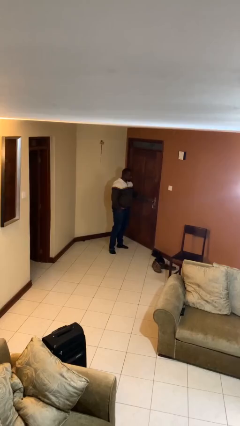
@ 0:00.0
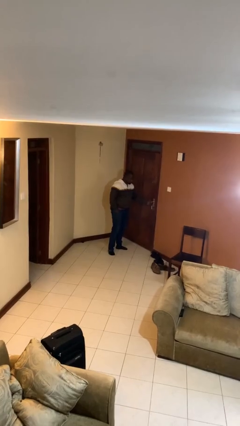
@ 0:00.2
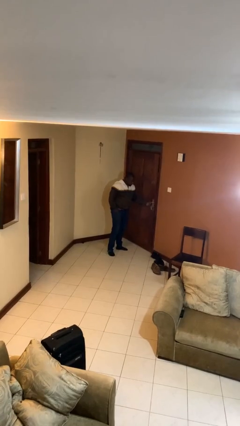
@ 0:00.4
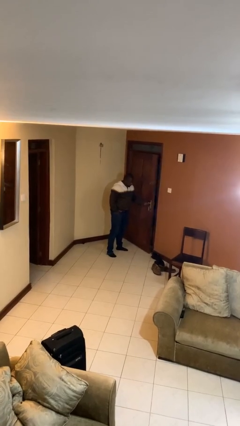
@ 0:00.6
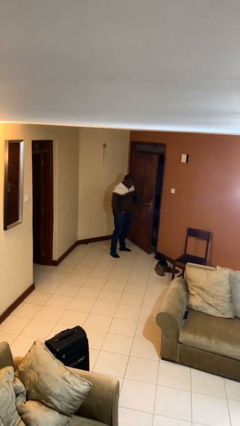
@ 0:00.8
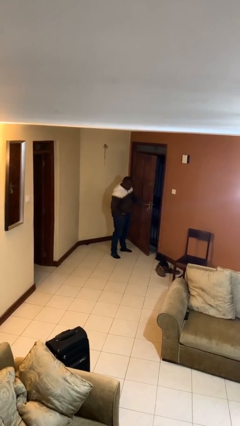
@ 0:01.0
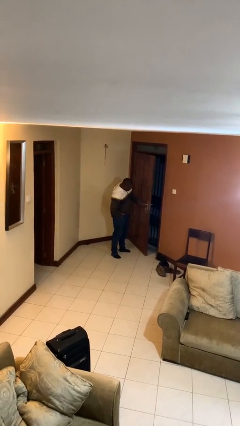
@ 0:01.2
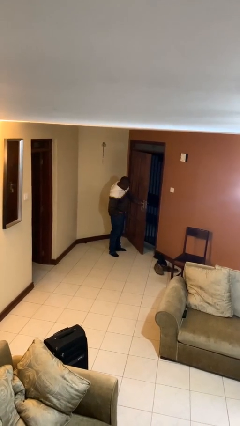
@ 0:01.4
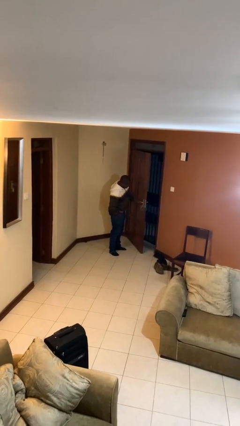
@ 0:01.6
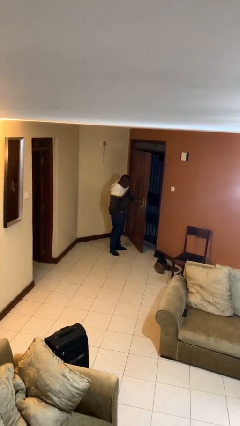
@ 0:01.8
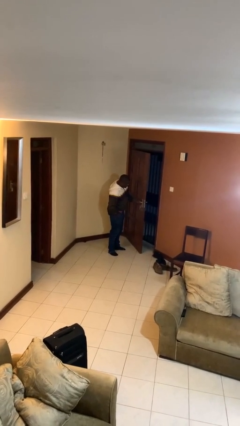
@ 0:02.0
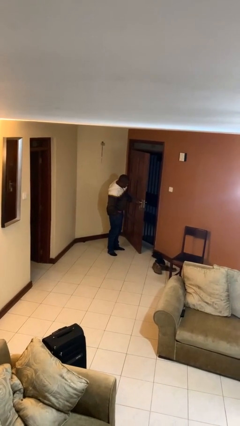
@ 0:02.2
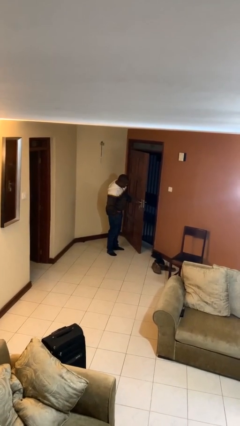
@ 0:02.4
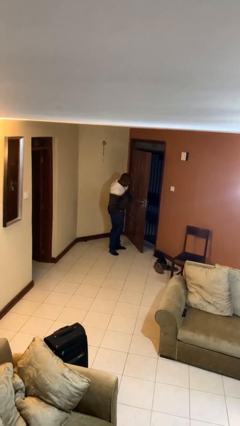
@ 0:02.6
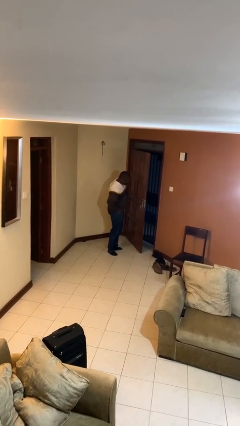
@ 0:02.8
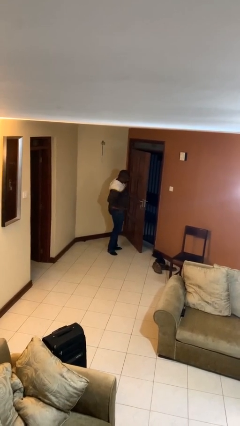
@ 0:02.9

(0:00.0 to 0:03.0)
person opens facility door

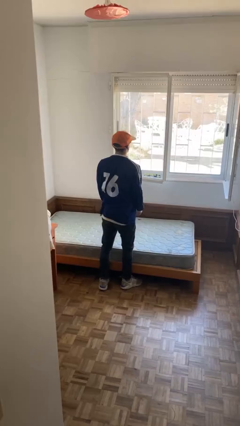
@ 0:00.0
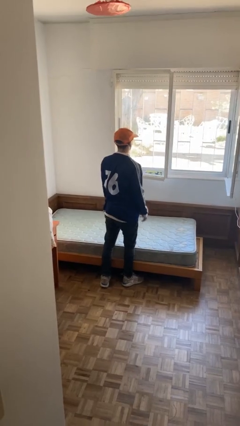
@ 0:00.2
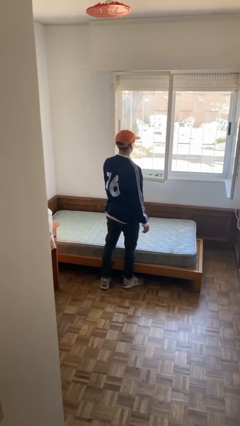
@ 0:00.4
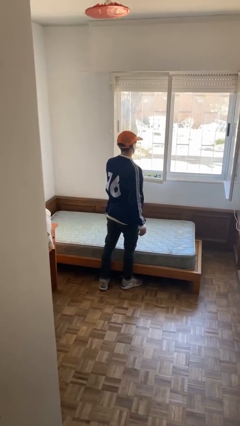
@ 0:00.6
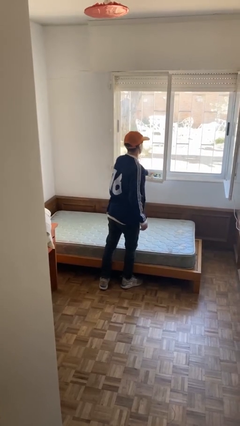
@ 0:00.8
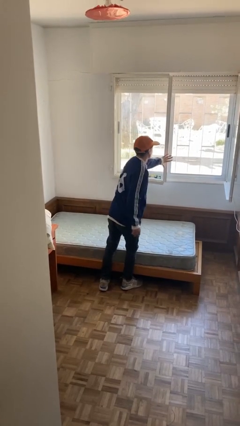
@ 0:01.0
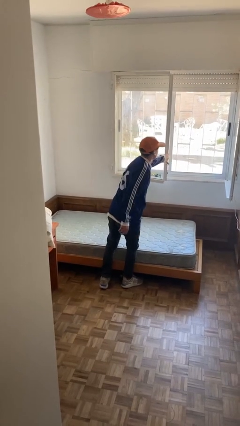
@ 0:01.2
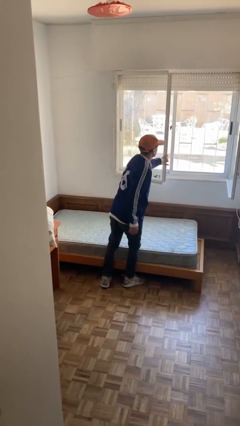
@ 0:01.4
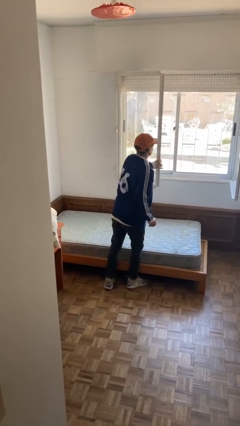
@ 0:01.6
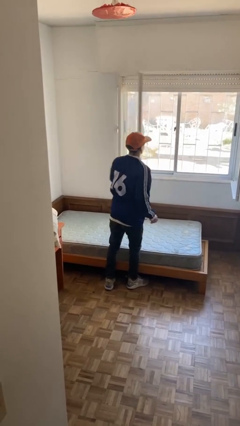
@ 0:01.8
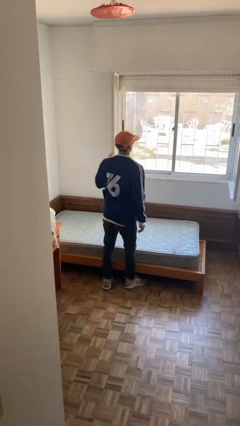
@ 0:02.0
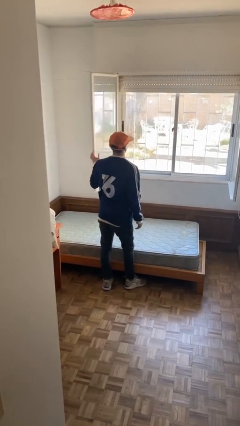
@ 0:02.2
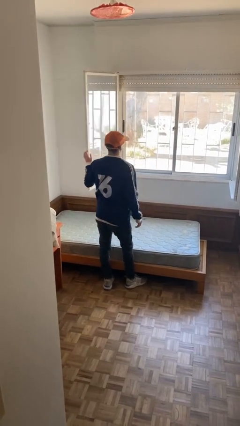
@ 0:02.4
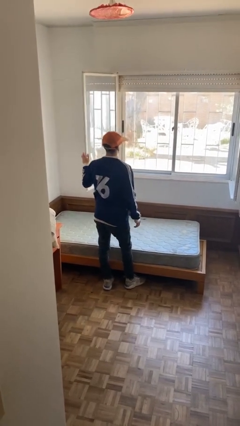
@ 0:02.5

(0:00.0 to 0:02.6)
person opens home window

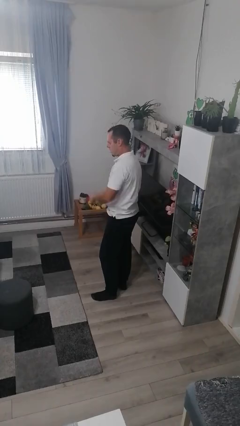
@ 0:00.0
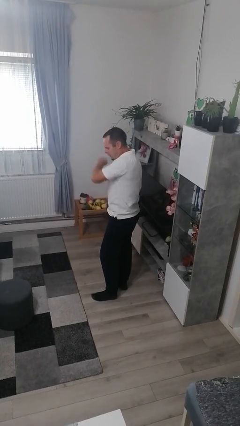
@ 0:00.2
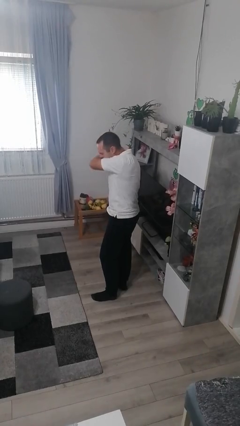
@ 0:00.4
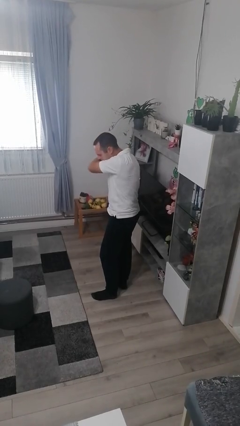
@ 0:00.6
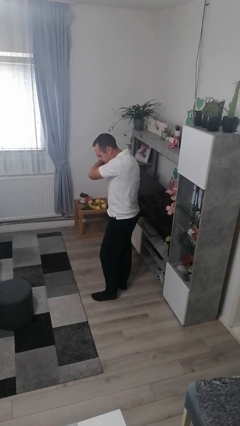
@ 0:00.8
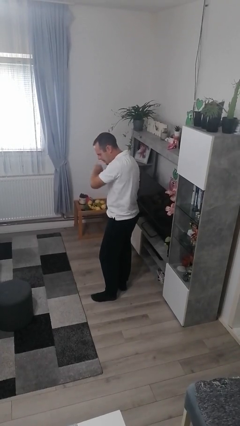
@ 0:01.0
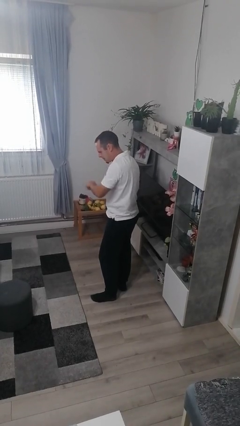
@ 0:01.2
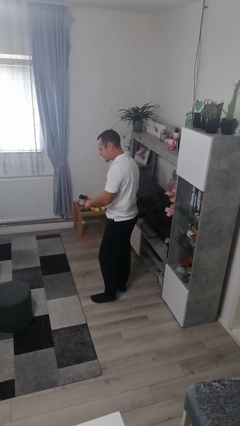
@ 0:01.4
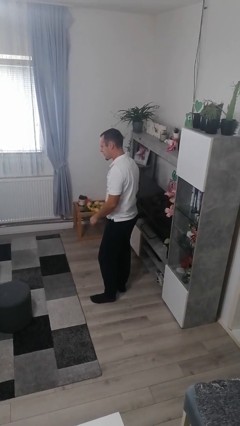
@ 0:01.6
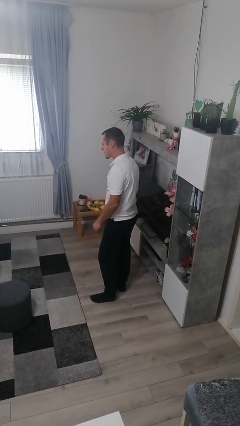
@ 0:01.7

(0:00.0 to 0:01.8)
person sneezes into arm

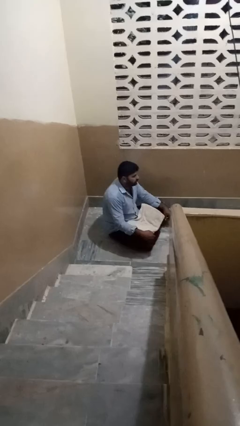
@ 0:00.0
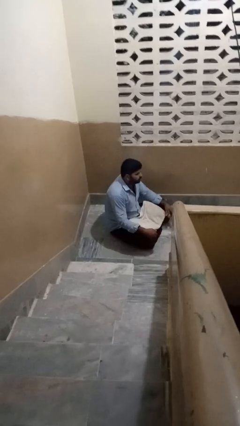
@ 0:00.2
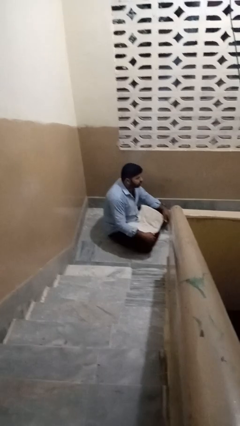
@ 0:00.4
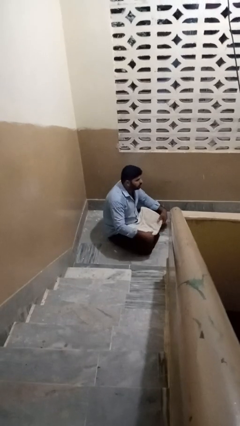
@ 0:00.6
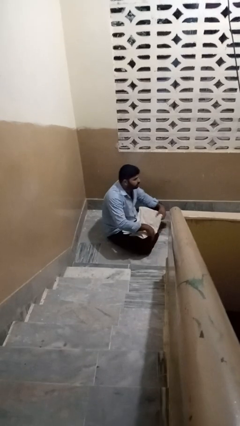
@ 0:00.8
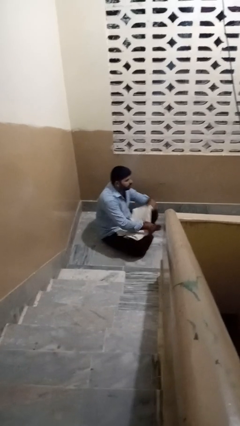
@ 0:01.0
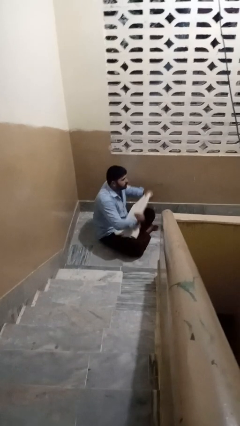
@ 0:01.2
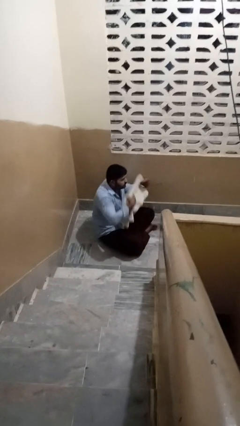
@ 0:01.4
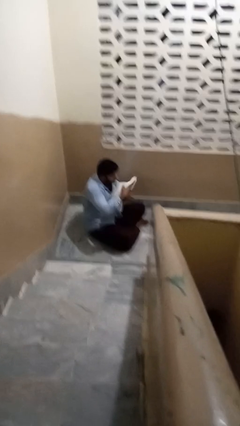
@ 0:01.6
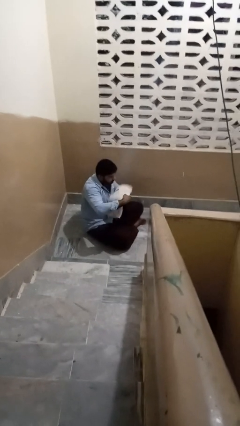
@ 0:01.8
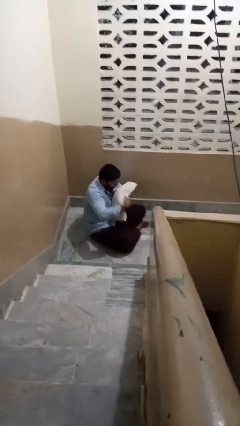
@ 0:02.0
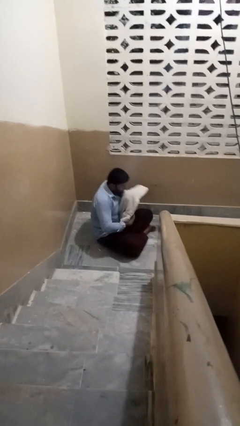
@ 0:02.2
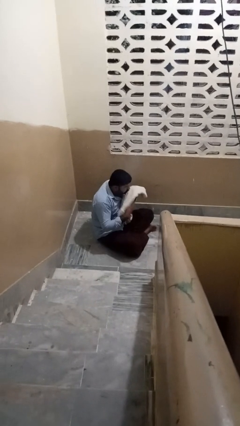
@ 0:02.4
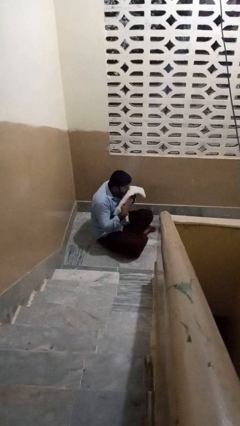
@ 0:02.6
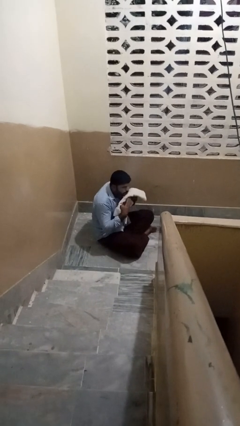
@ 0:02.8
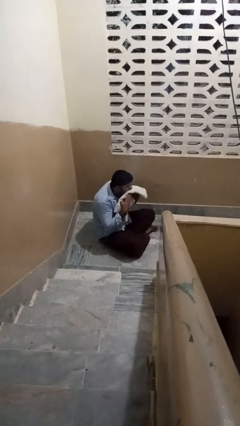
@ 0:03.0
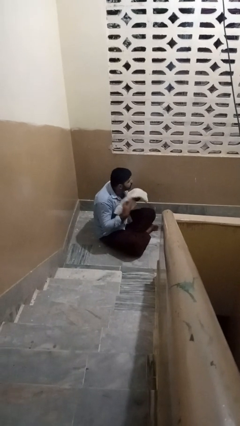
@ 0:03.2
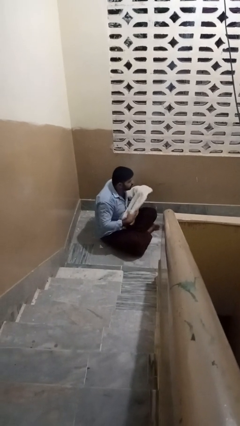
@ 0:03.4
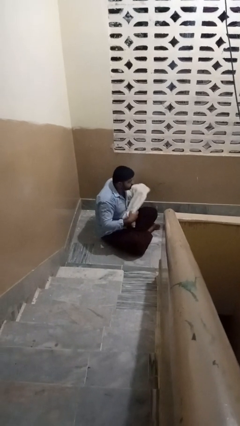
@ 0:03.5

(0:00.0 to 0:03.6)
person wipes mouth with napkin

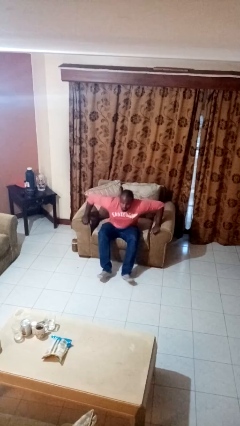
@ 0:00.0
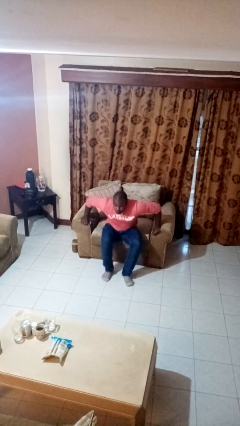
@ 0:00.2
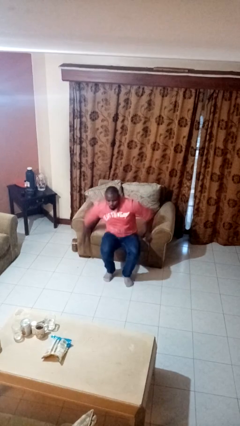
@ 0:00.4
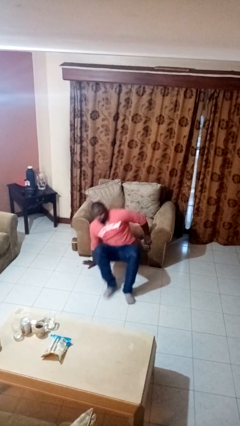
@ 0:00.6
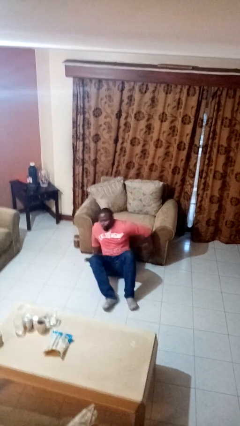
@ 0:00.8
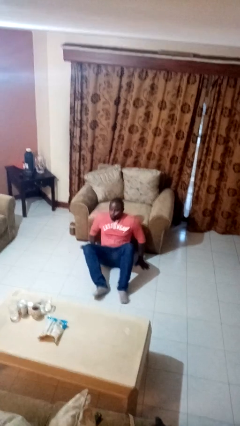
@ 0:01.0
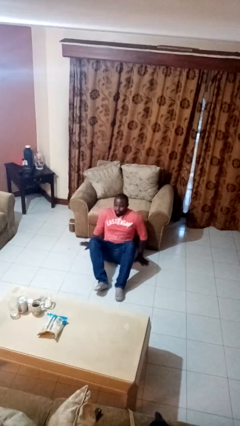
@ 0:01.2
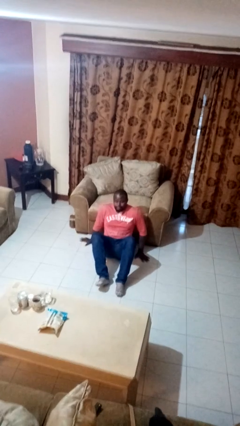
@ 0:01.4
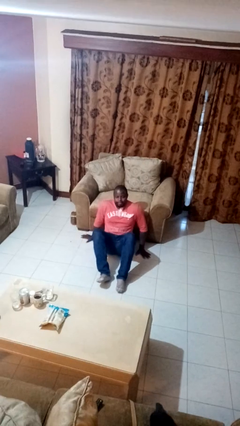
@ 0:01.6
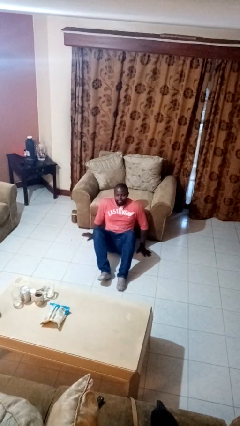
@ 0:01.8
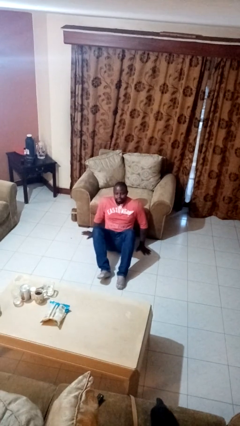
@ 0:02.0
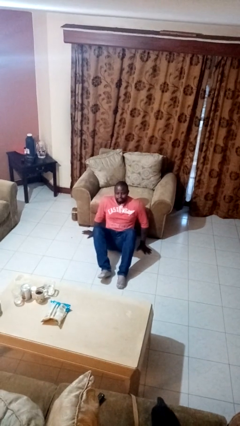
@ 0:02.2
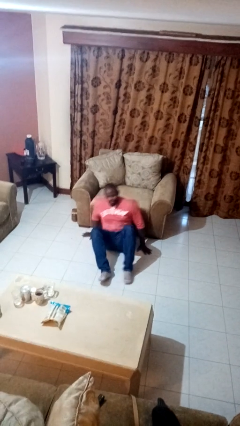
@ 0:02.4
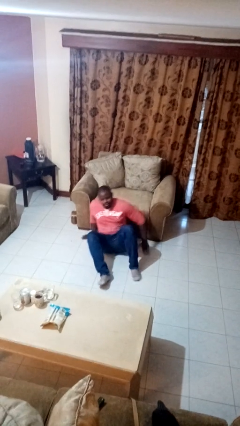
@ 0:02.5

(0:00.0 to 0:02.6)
person falls from chair

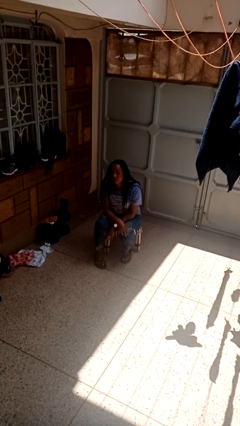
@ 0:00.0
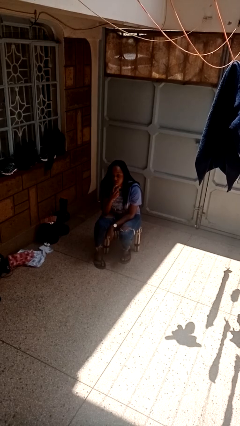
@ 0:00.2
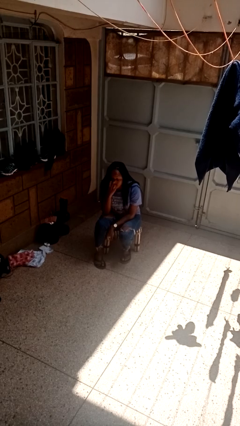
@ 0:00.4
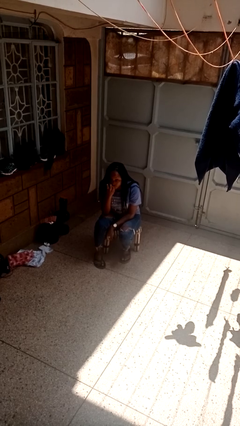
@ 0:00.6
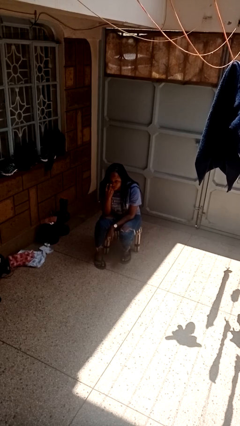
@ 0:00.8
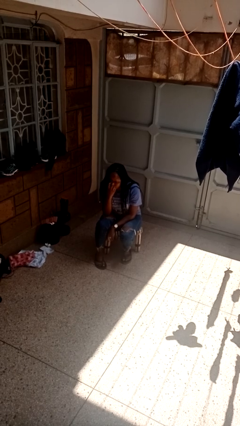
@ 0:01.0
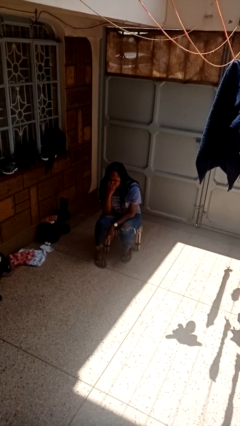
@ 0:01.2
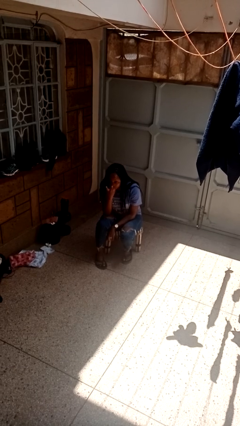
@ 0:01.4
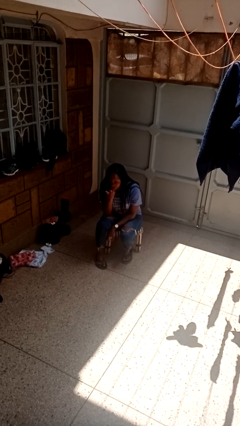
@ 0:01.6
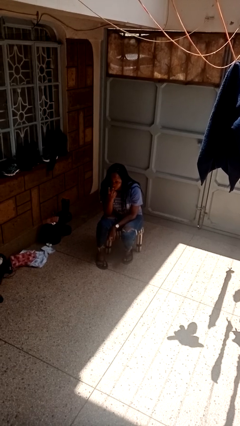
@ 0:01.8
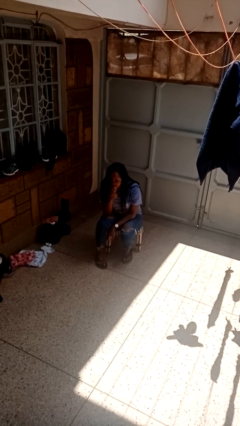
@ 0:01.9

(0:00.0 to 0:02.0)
person gestures watch closely

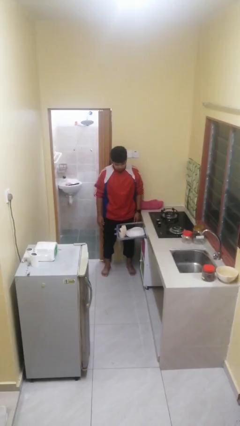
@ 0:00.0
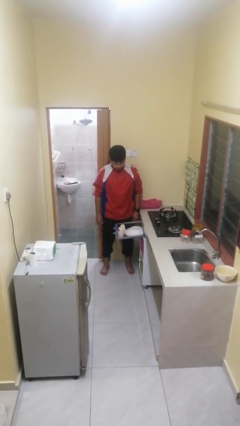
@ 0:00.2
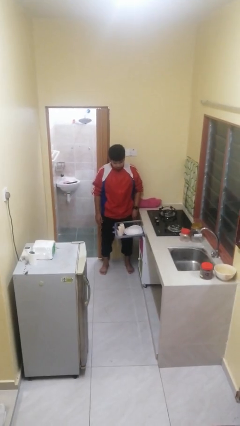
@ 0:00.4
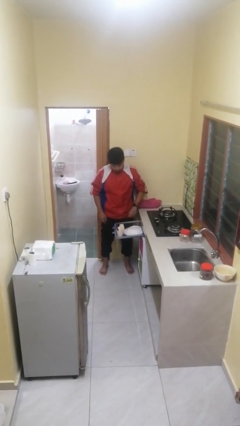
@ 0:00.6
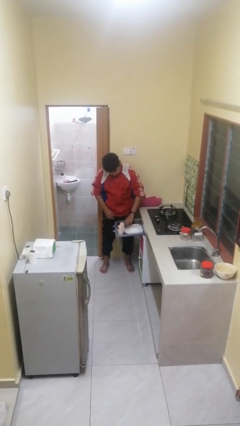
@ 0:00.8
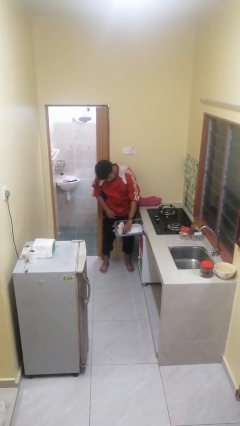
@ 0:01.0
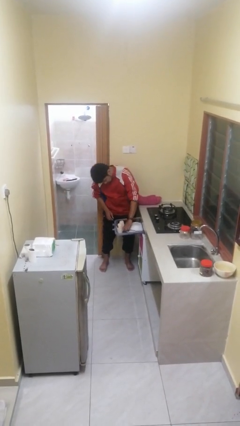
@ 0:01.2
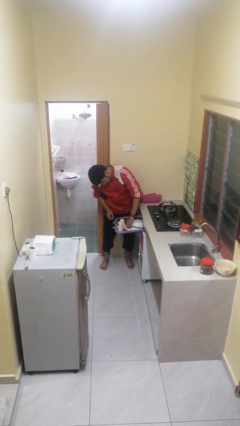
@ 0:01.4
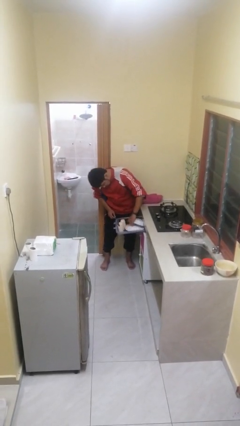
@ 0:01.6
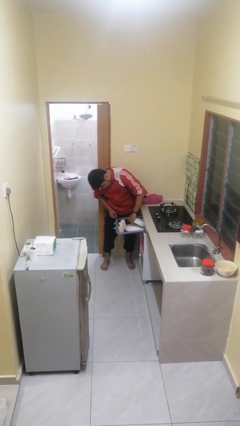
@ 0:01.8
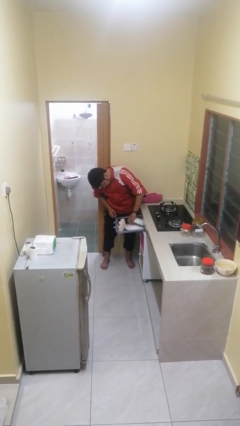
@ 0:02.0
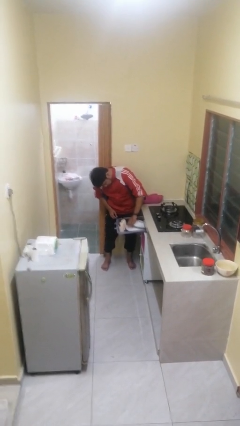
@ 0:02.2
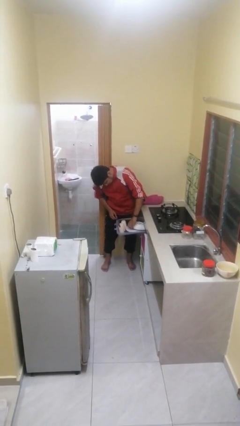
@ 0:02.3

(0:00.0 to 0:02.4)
person searches in kitchen drawer
